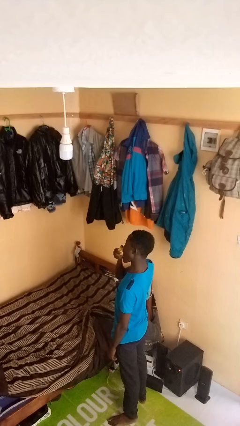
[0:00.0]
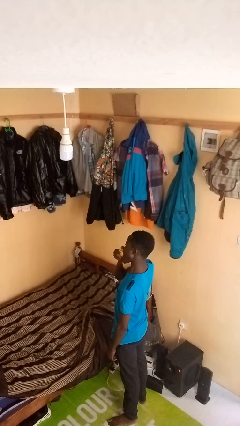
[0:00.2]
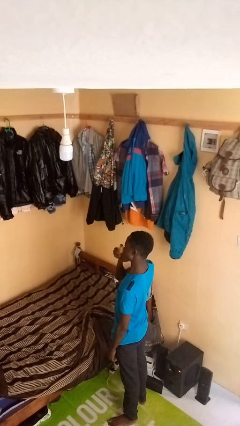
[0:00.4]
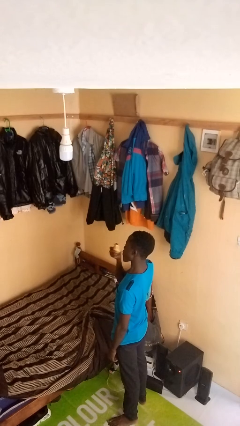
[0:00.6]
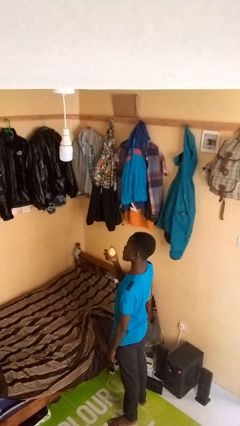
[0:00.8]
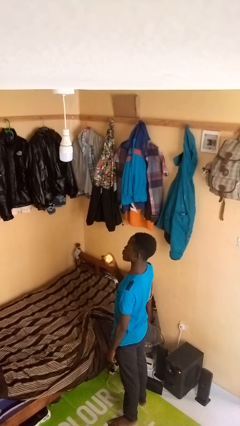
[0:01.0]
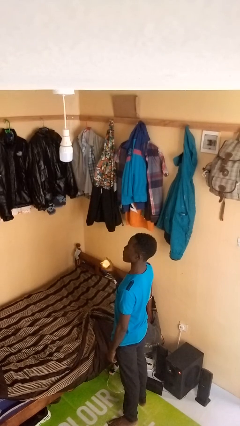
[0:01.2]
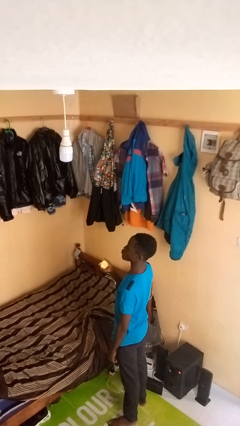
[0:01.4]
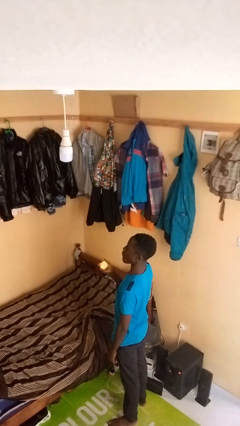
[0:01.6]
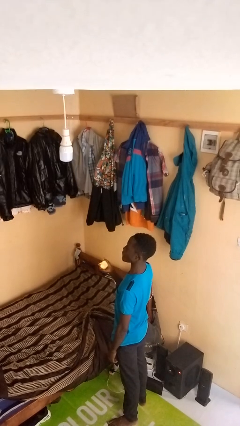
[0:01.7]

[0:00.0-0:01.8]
person eats apple

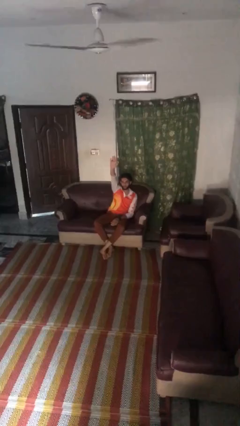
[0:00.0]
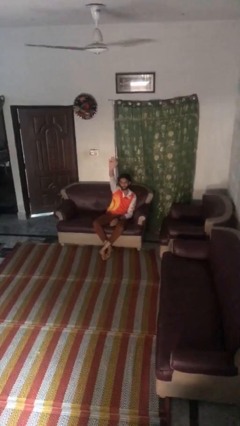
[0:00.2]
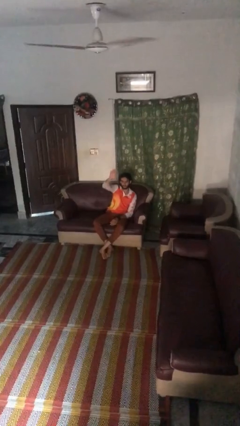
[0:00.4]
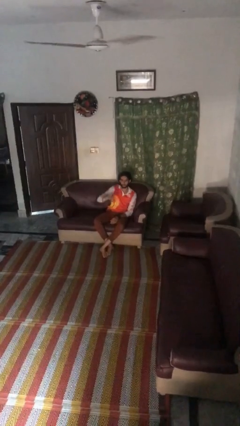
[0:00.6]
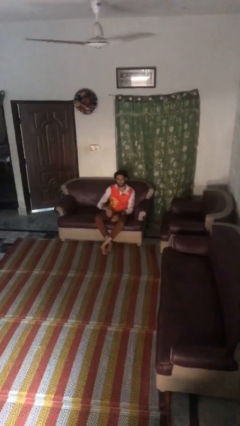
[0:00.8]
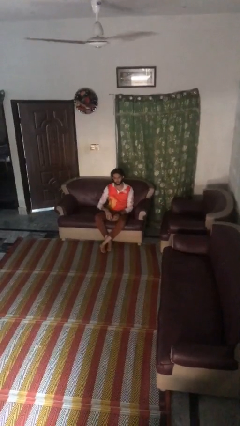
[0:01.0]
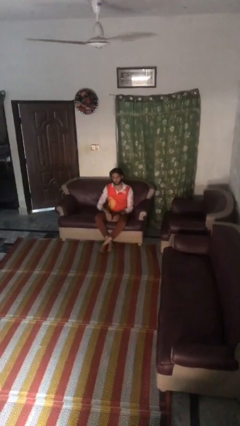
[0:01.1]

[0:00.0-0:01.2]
person gestures lower hand

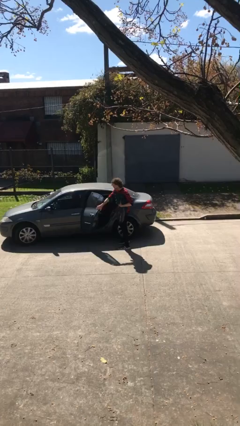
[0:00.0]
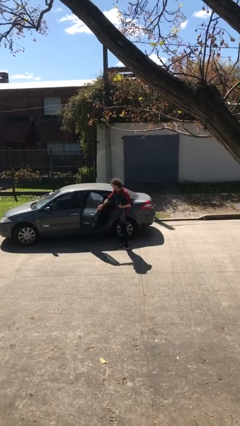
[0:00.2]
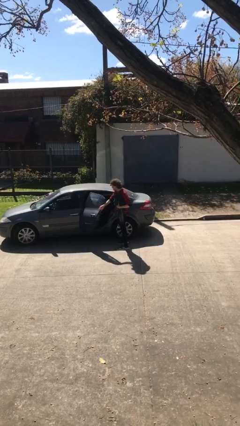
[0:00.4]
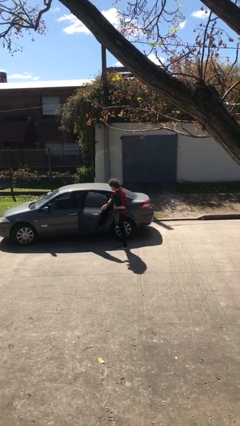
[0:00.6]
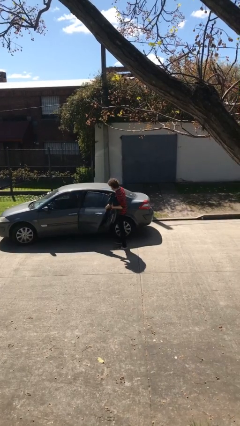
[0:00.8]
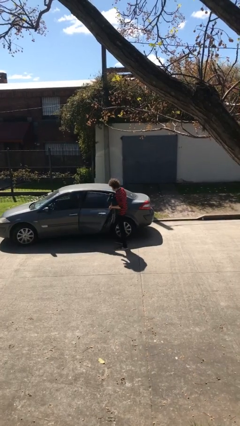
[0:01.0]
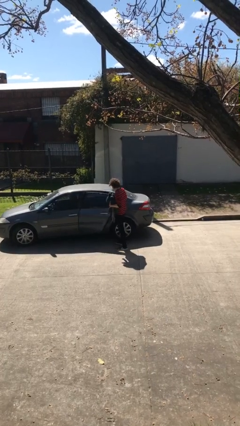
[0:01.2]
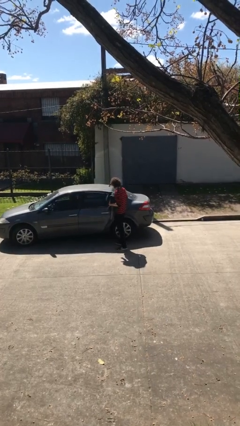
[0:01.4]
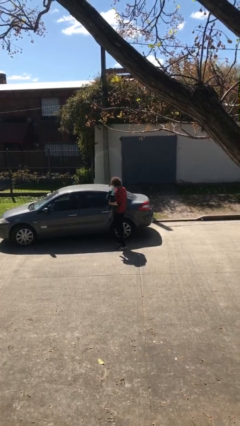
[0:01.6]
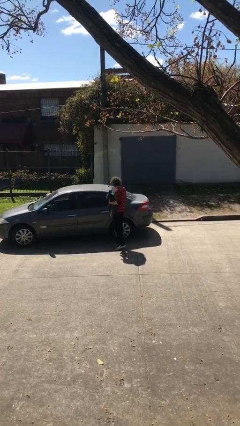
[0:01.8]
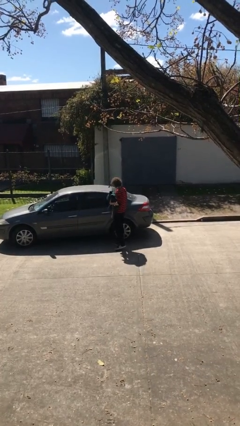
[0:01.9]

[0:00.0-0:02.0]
person closes car door

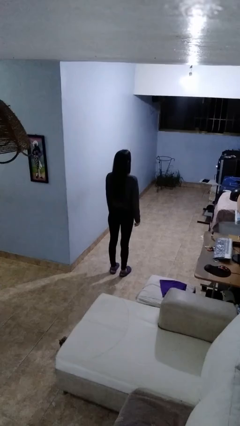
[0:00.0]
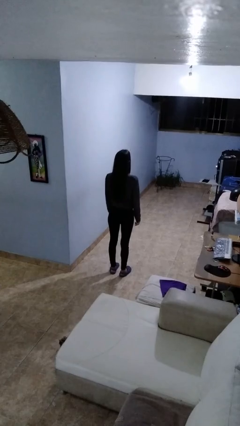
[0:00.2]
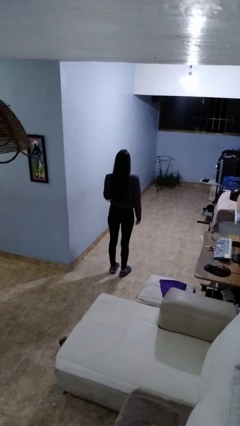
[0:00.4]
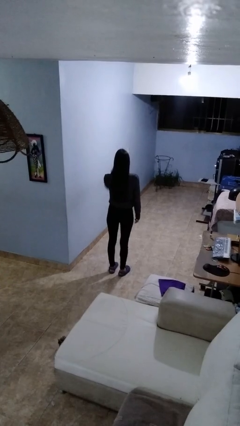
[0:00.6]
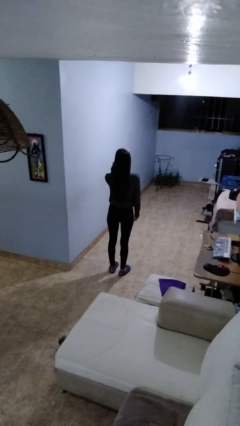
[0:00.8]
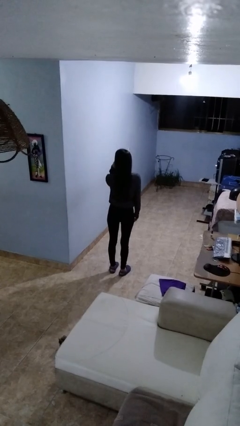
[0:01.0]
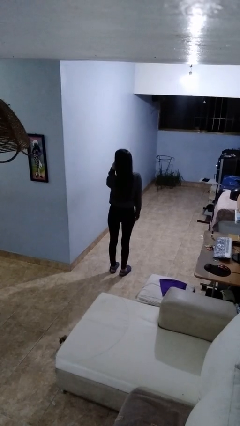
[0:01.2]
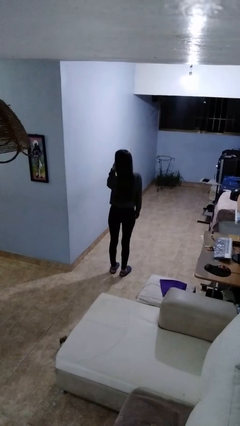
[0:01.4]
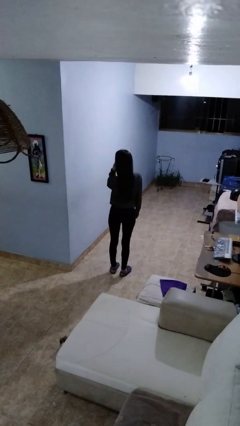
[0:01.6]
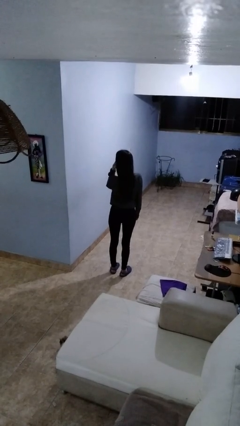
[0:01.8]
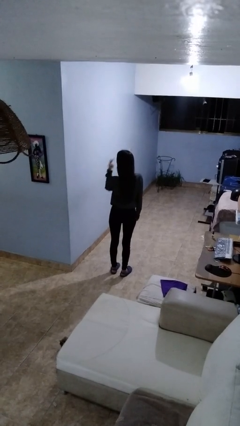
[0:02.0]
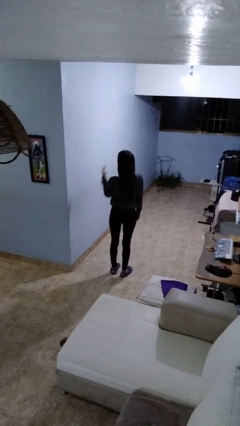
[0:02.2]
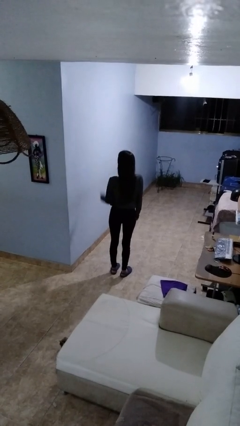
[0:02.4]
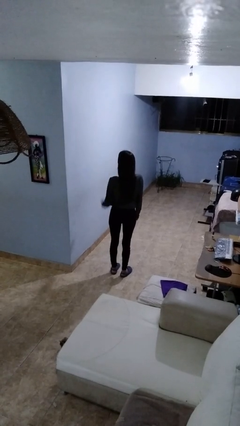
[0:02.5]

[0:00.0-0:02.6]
person gestures watch closely

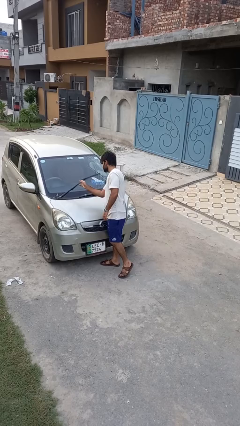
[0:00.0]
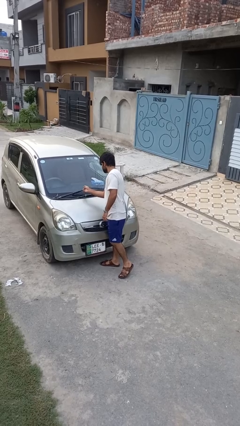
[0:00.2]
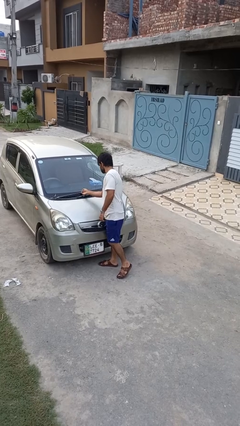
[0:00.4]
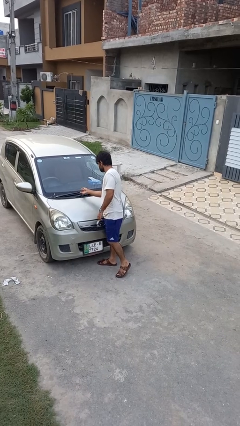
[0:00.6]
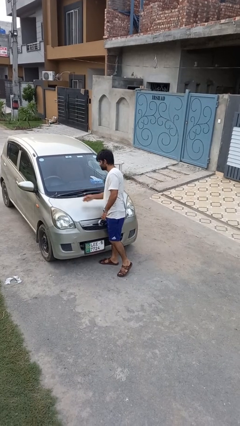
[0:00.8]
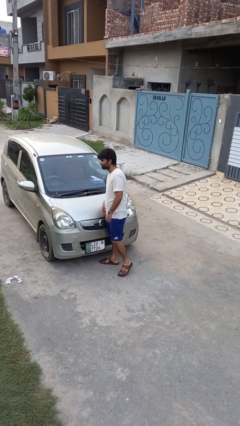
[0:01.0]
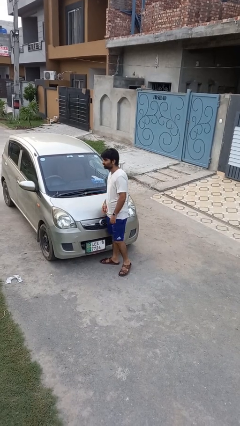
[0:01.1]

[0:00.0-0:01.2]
person flips down car wipers

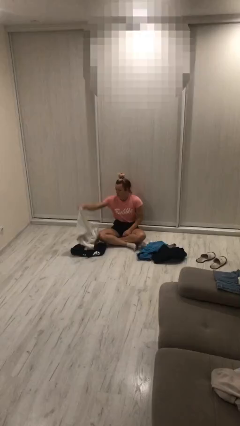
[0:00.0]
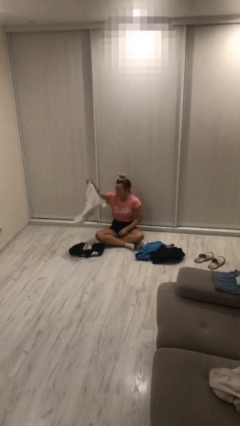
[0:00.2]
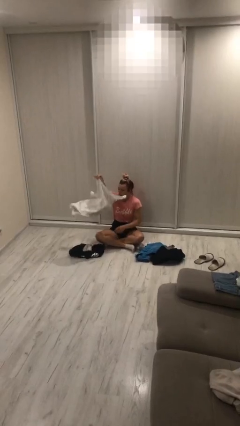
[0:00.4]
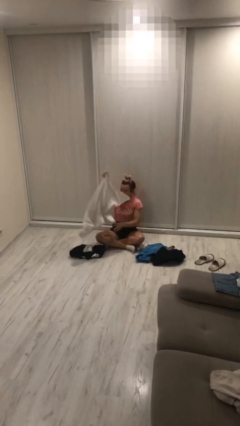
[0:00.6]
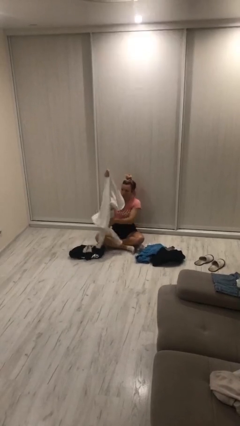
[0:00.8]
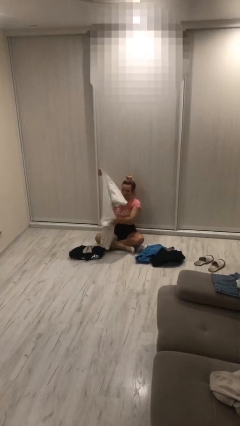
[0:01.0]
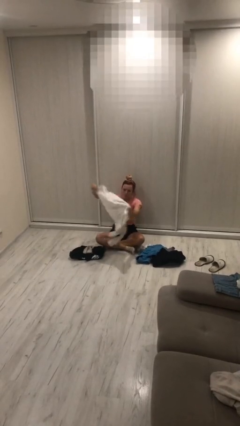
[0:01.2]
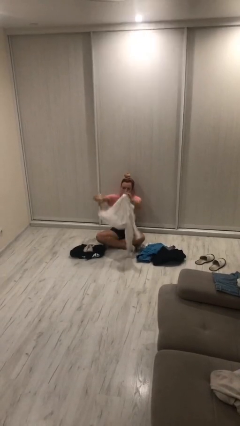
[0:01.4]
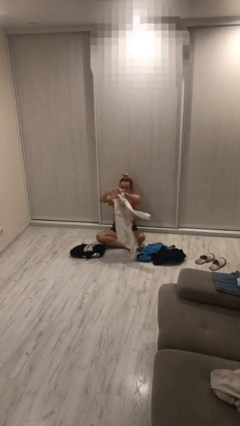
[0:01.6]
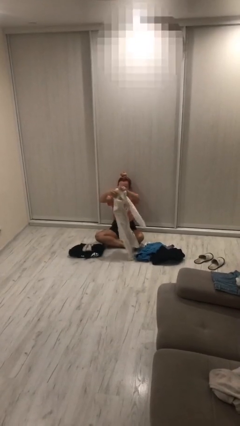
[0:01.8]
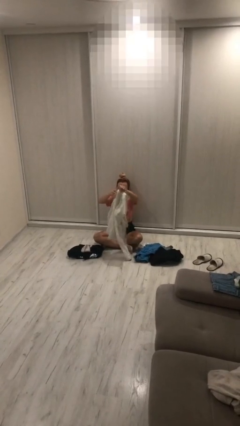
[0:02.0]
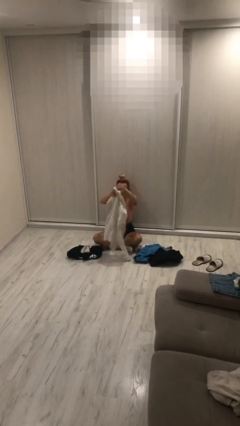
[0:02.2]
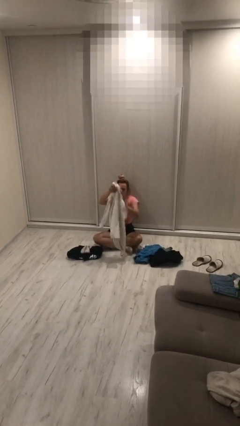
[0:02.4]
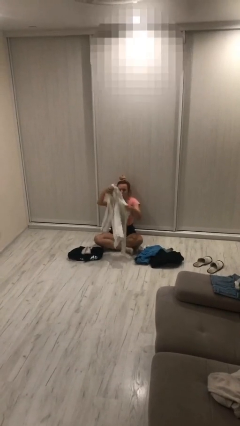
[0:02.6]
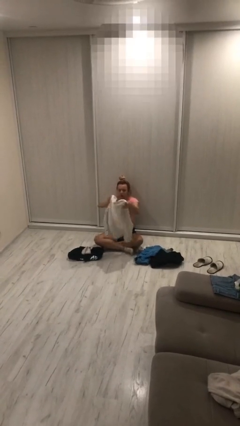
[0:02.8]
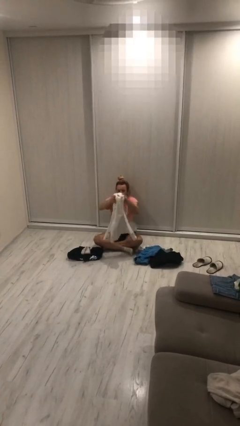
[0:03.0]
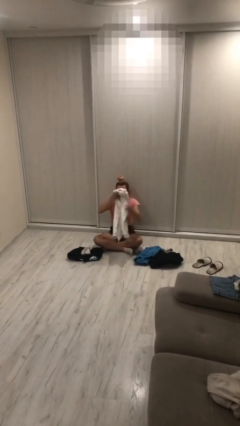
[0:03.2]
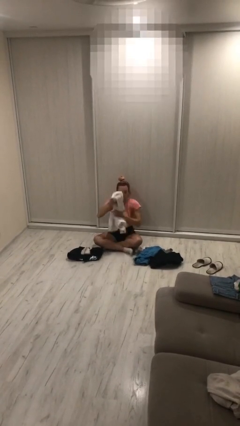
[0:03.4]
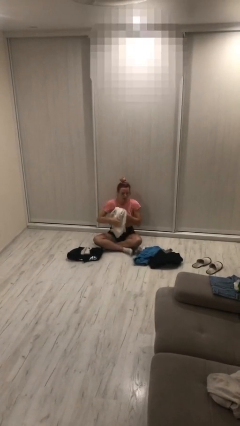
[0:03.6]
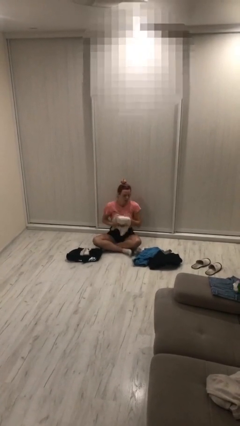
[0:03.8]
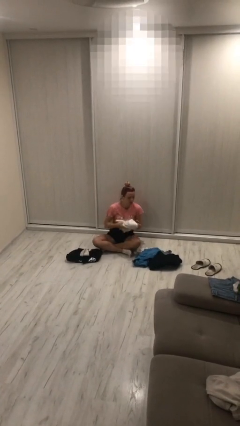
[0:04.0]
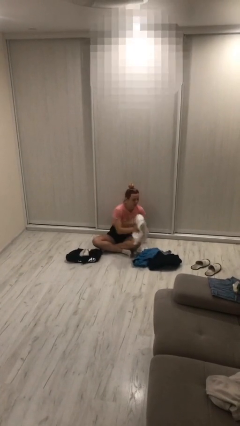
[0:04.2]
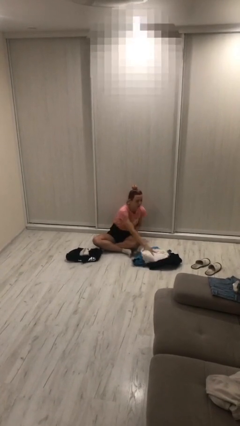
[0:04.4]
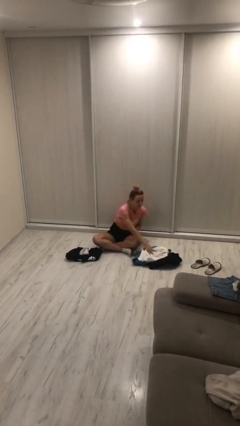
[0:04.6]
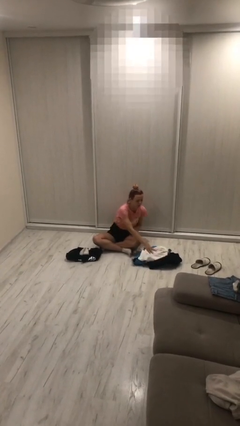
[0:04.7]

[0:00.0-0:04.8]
person folds shirt

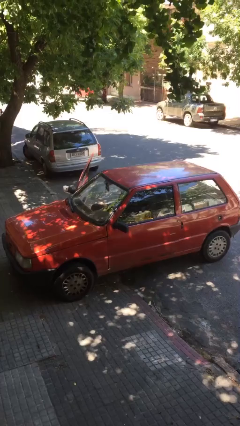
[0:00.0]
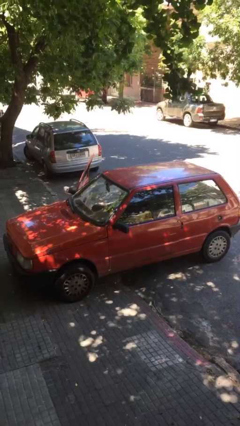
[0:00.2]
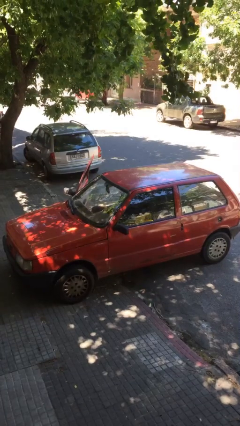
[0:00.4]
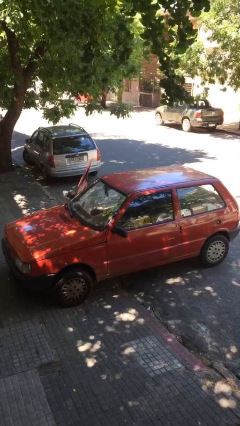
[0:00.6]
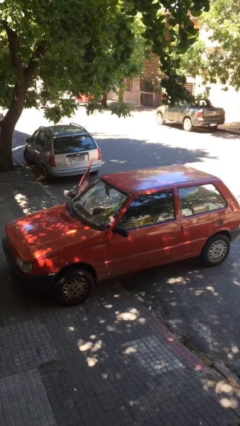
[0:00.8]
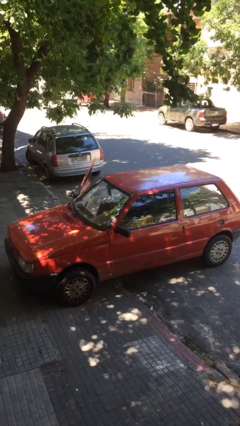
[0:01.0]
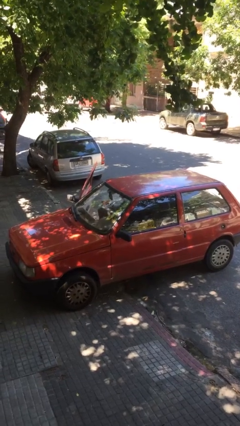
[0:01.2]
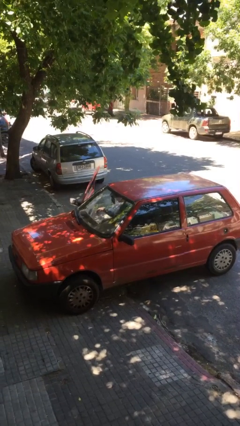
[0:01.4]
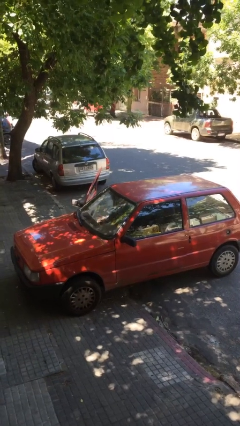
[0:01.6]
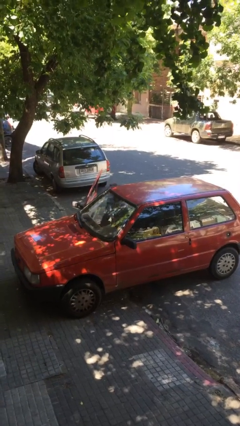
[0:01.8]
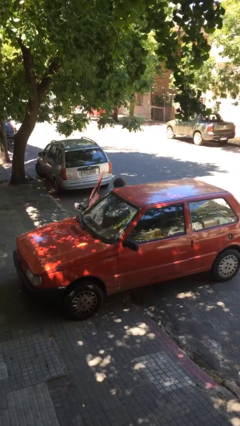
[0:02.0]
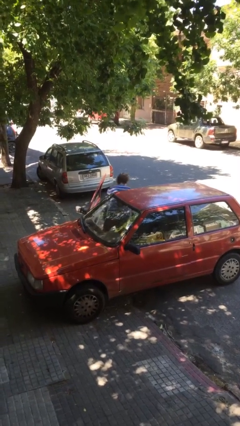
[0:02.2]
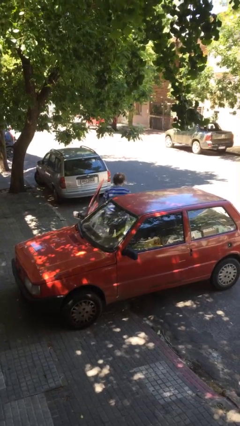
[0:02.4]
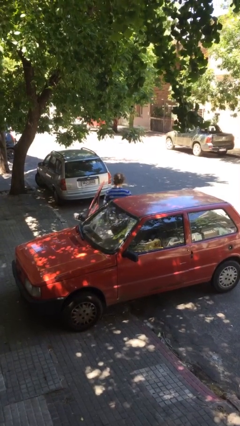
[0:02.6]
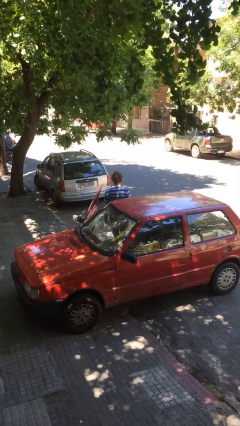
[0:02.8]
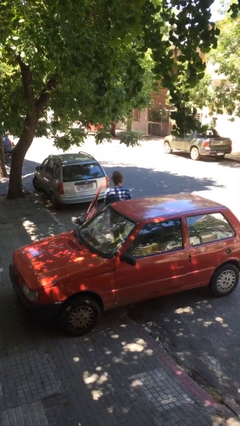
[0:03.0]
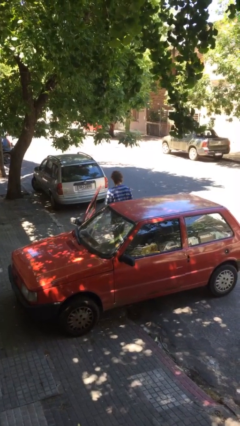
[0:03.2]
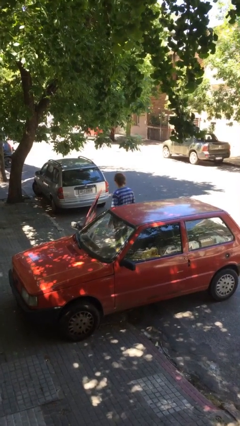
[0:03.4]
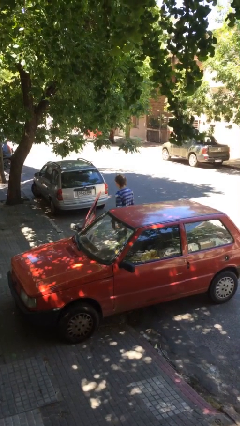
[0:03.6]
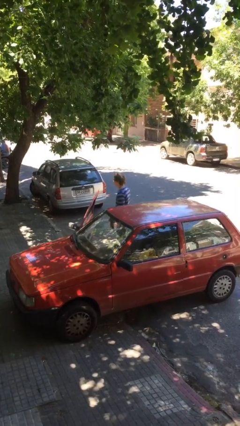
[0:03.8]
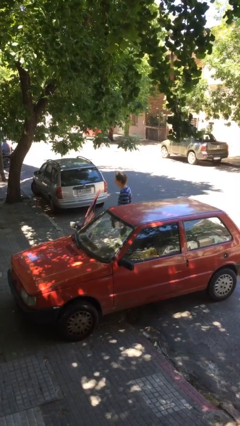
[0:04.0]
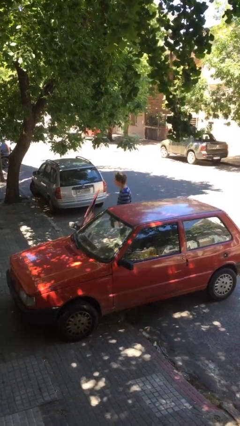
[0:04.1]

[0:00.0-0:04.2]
person exits car
